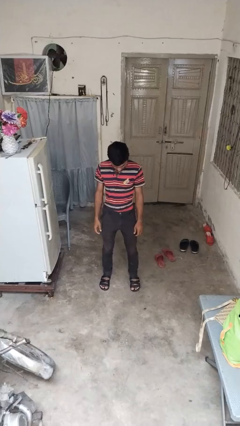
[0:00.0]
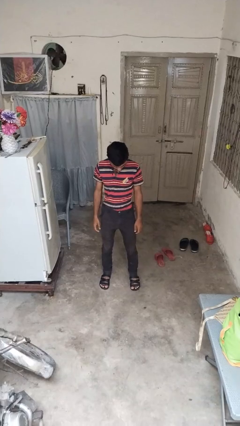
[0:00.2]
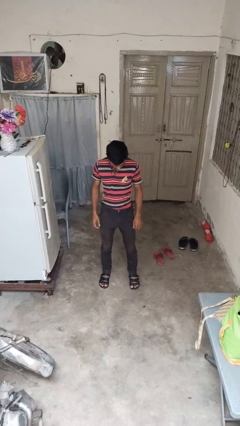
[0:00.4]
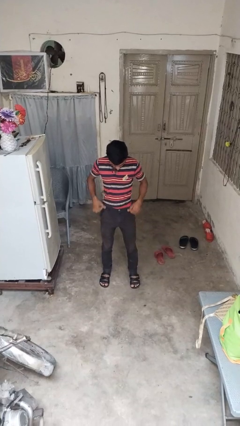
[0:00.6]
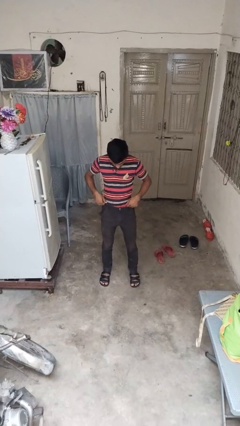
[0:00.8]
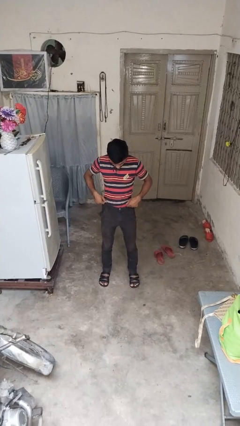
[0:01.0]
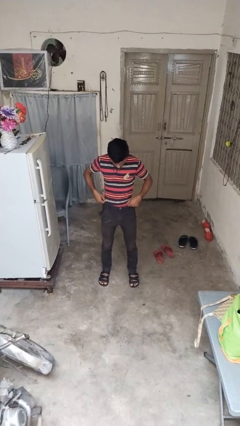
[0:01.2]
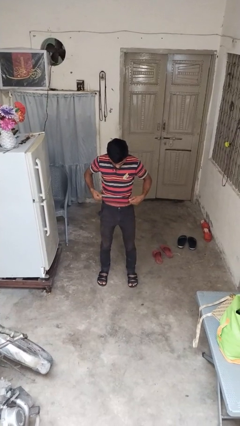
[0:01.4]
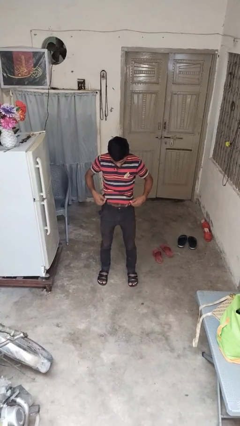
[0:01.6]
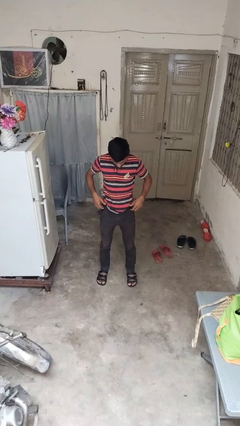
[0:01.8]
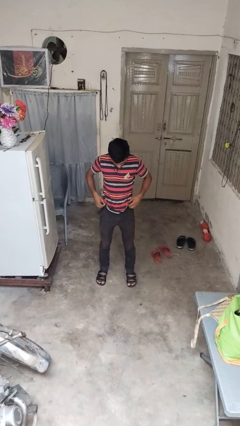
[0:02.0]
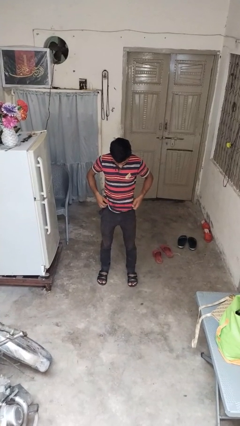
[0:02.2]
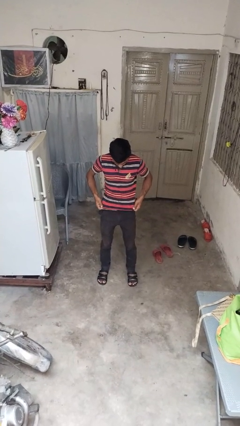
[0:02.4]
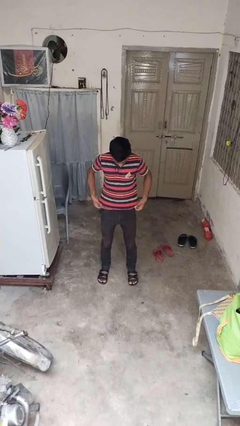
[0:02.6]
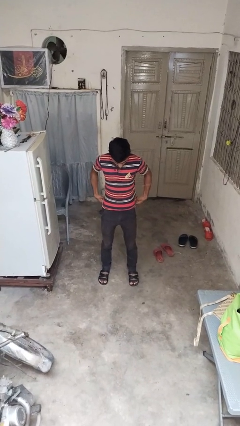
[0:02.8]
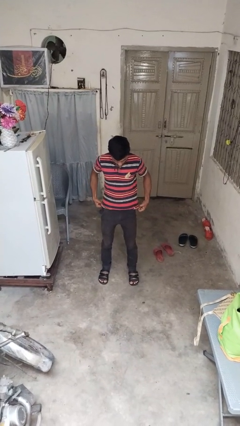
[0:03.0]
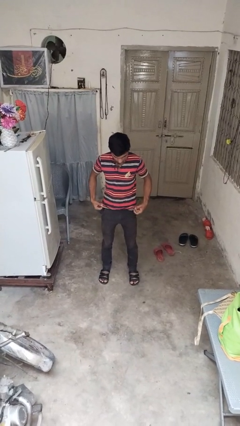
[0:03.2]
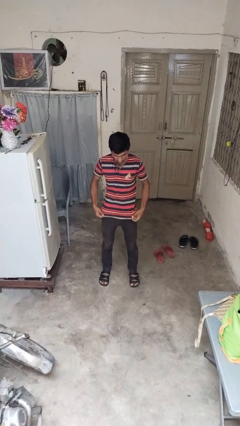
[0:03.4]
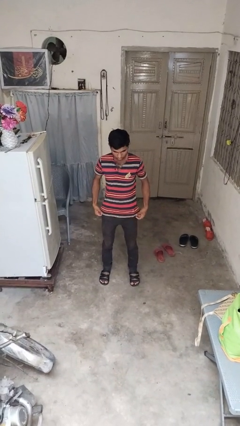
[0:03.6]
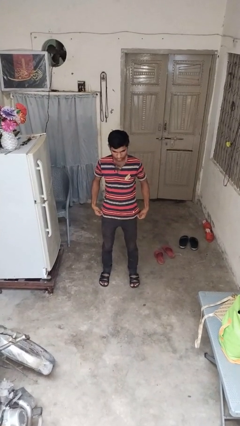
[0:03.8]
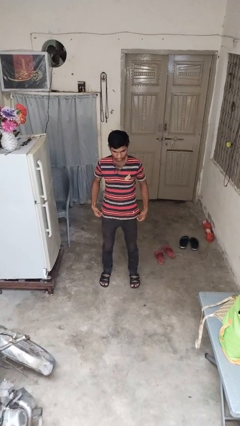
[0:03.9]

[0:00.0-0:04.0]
person untucks shirt

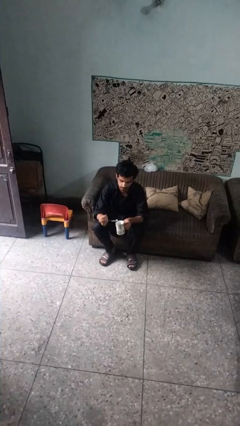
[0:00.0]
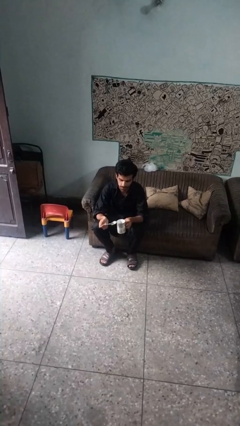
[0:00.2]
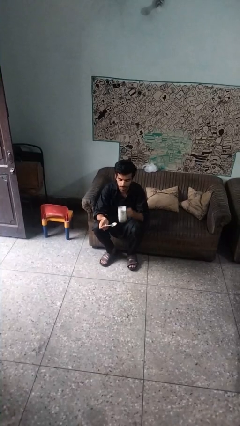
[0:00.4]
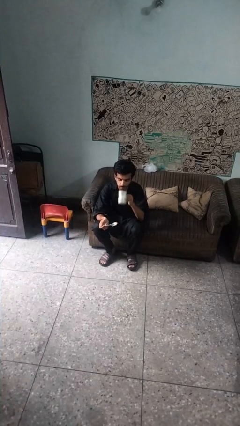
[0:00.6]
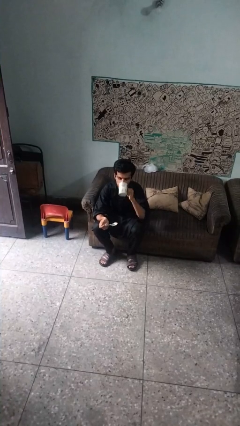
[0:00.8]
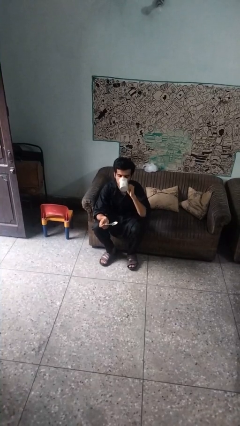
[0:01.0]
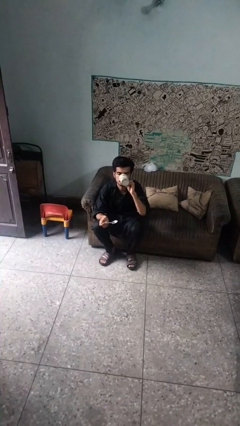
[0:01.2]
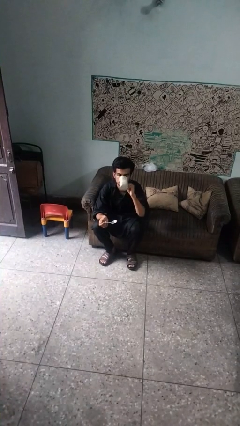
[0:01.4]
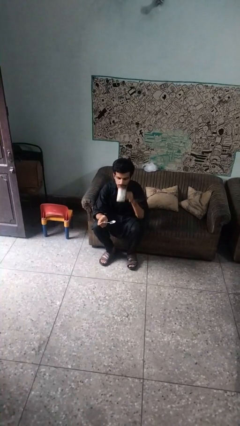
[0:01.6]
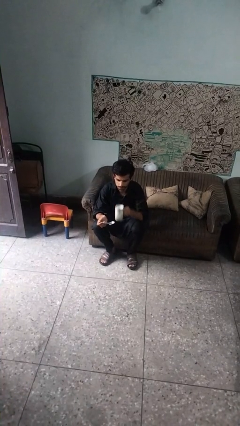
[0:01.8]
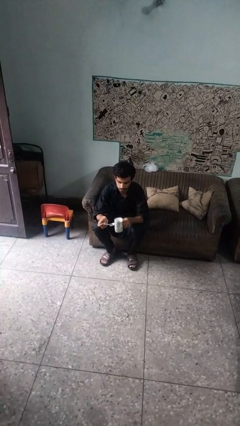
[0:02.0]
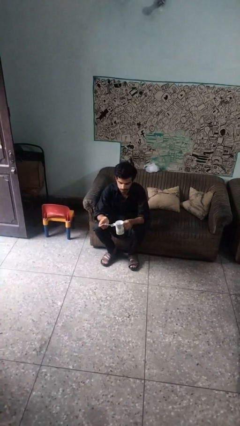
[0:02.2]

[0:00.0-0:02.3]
person drinks from mug

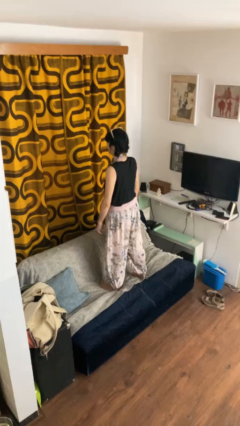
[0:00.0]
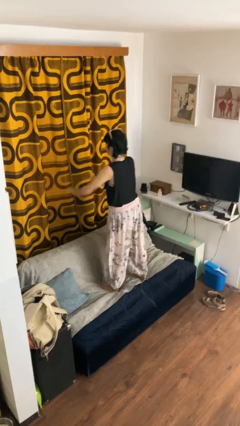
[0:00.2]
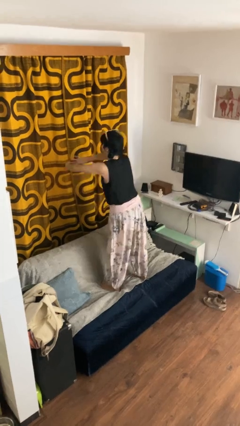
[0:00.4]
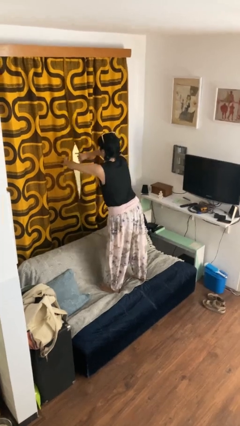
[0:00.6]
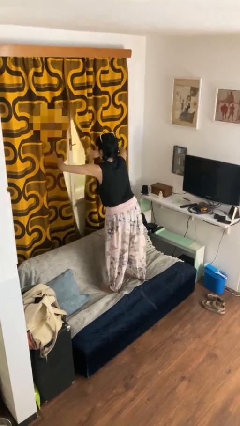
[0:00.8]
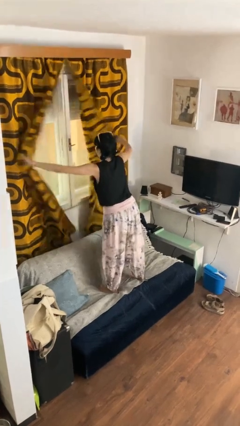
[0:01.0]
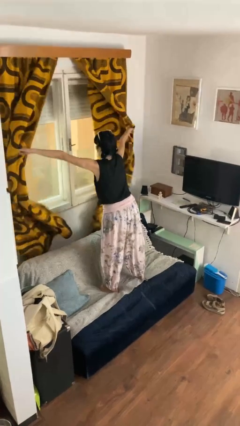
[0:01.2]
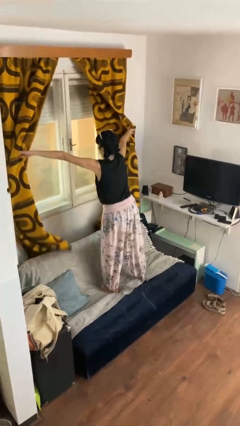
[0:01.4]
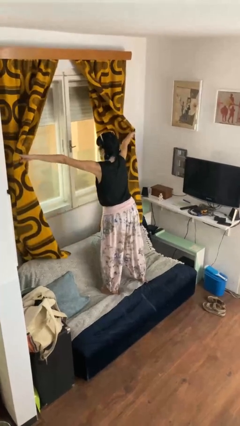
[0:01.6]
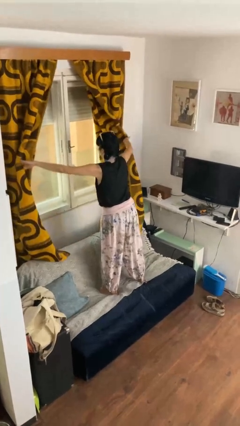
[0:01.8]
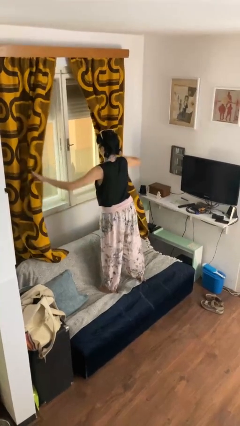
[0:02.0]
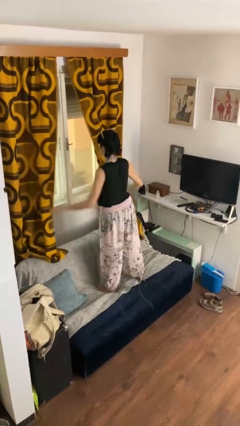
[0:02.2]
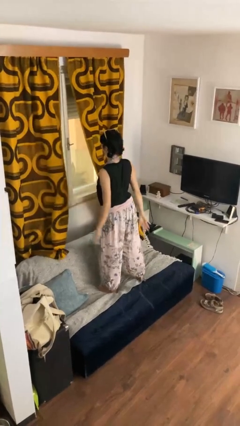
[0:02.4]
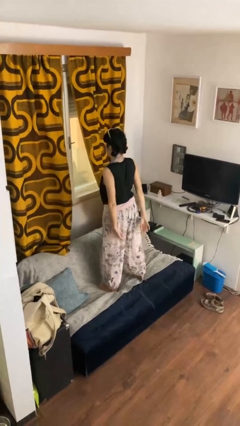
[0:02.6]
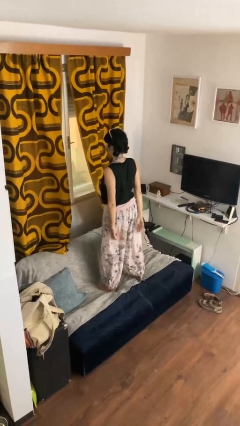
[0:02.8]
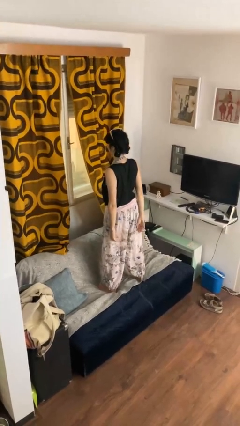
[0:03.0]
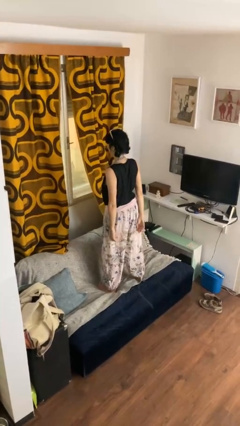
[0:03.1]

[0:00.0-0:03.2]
person opens curtains

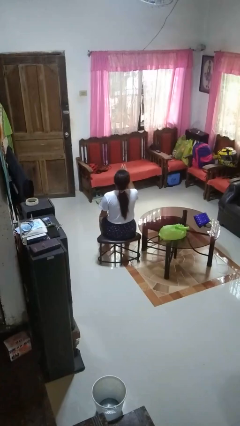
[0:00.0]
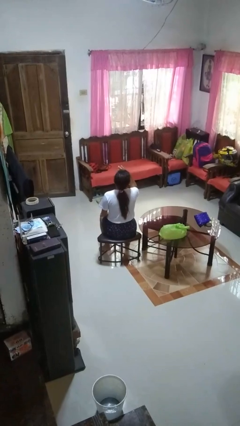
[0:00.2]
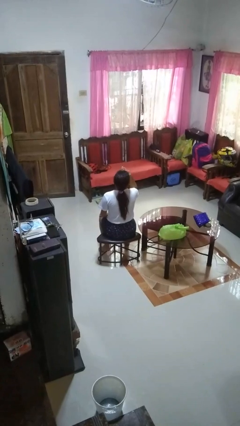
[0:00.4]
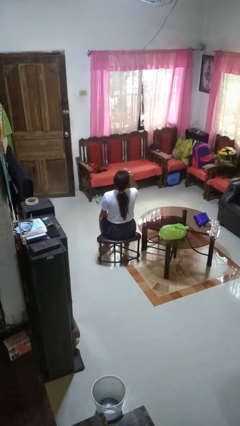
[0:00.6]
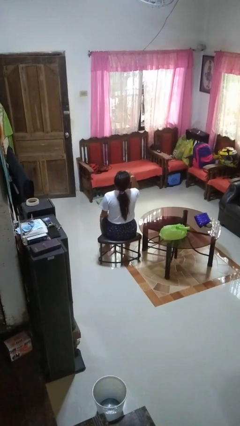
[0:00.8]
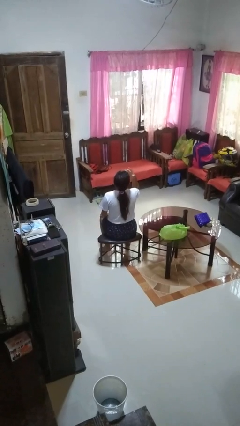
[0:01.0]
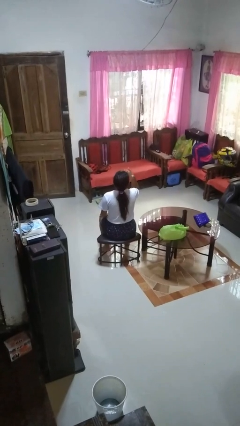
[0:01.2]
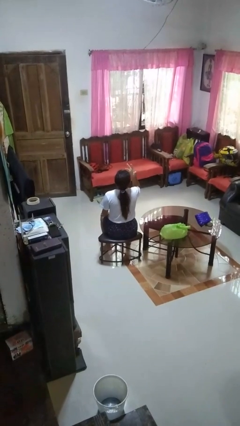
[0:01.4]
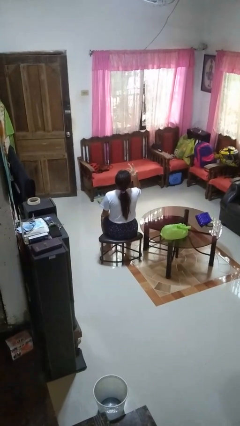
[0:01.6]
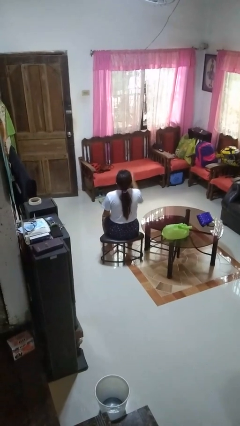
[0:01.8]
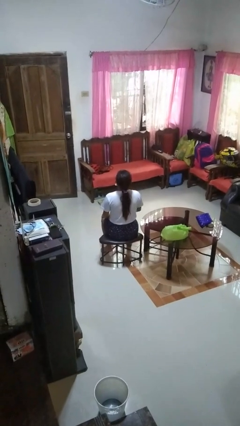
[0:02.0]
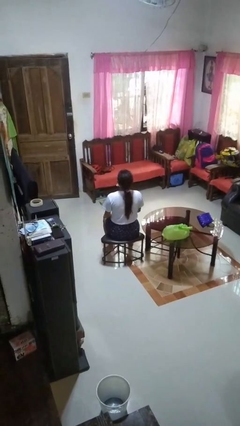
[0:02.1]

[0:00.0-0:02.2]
person licks fingers

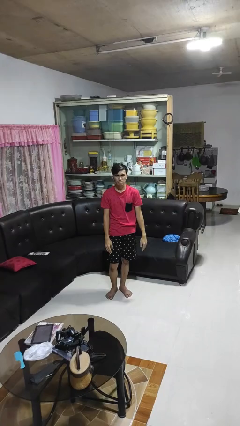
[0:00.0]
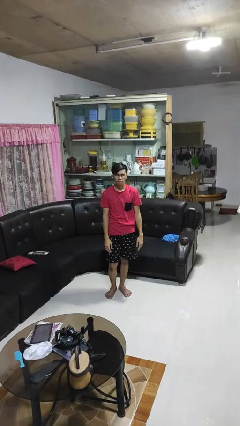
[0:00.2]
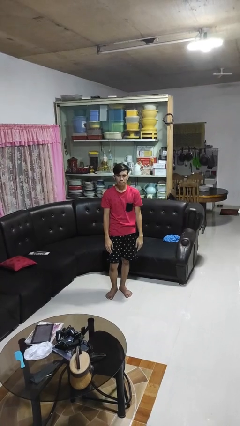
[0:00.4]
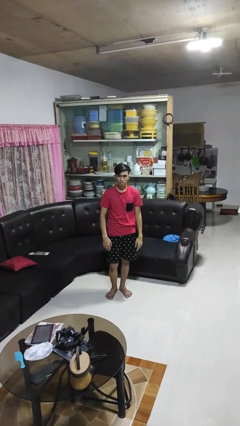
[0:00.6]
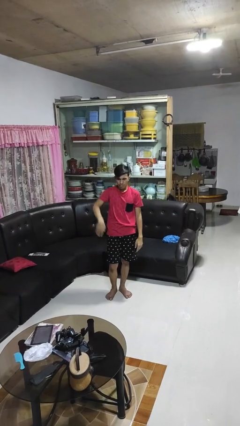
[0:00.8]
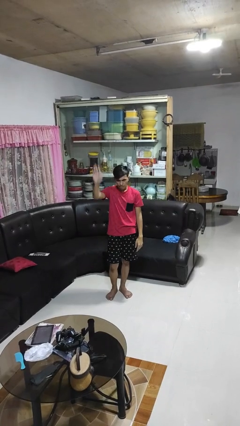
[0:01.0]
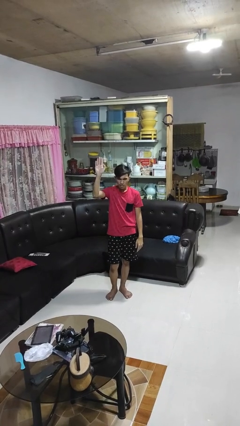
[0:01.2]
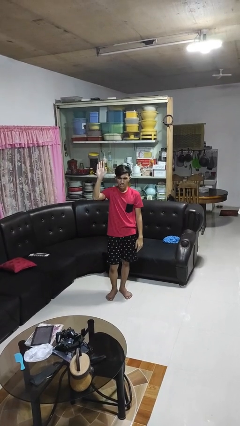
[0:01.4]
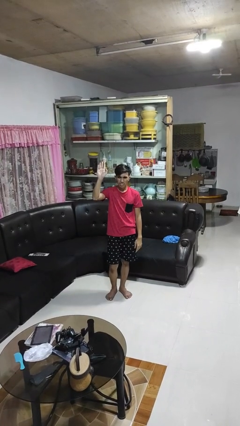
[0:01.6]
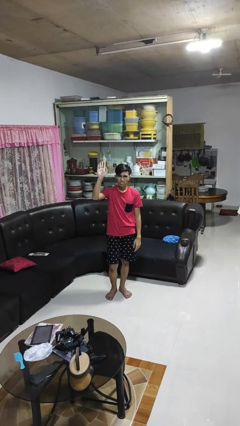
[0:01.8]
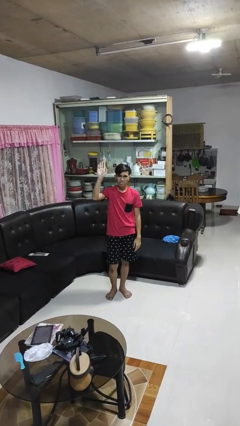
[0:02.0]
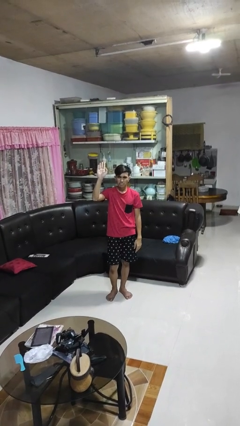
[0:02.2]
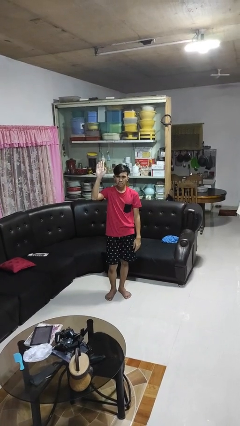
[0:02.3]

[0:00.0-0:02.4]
person gestures swipe up

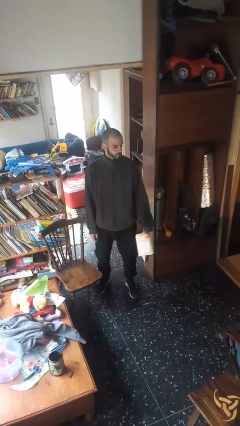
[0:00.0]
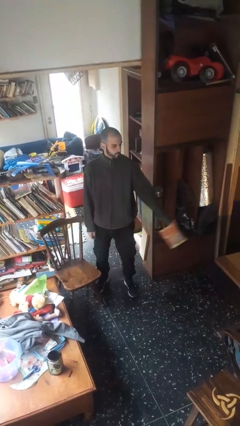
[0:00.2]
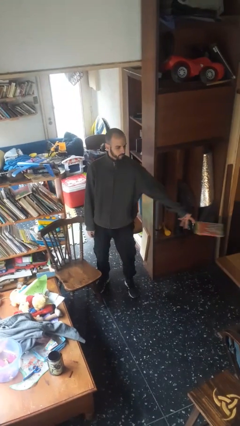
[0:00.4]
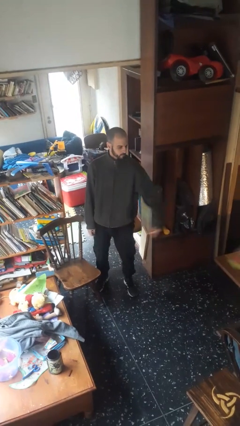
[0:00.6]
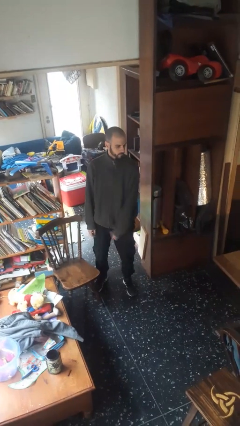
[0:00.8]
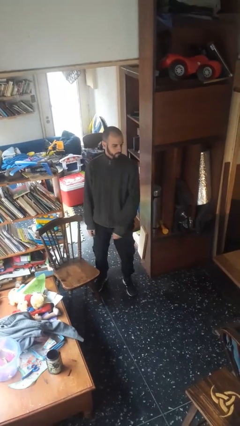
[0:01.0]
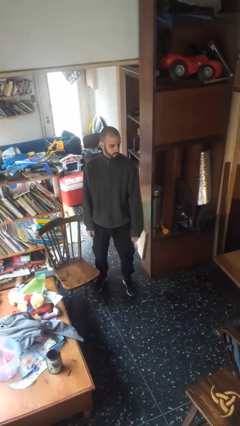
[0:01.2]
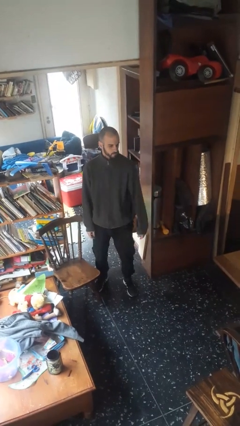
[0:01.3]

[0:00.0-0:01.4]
person throws object on table

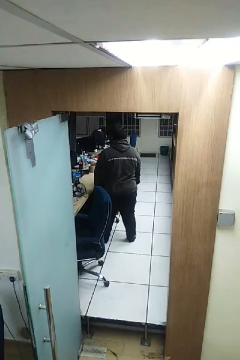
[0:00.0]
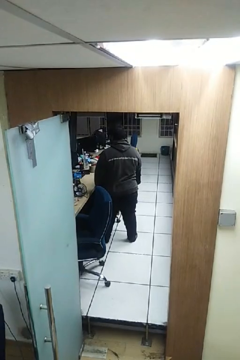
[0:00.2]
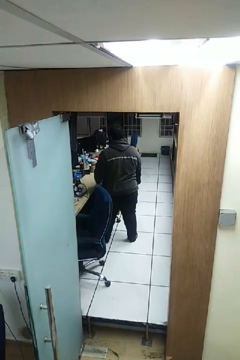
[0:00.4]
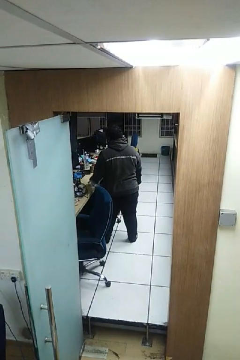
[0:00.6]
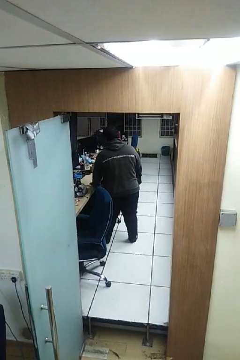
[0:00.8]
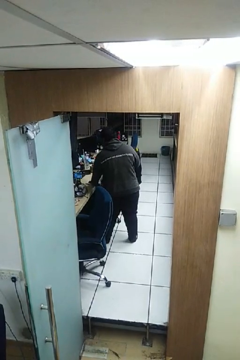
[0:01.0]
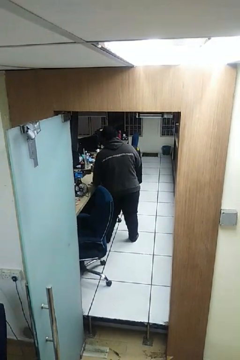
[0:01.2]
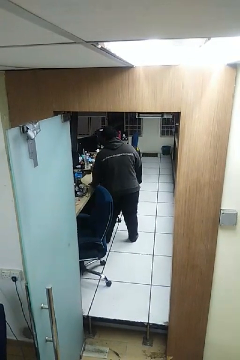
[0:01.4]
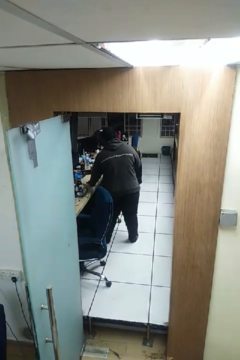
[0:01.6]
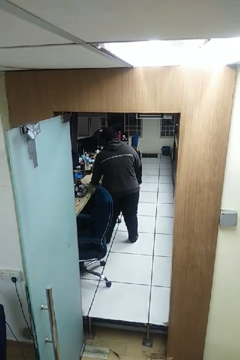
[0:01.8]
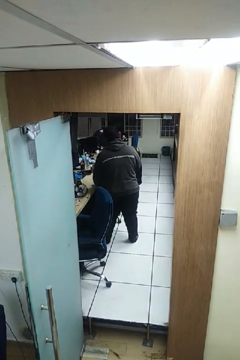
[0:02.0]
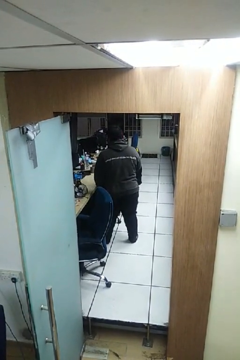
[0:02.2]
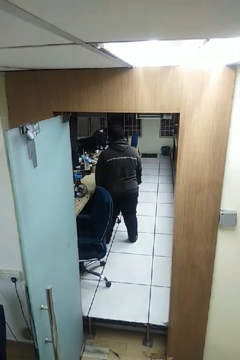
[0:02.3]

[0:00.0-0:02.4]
person cleans table with rag
